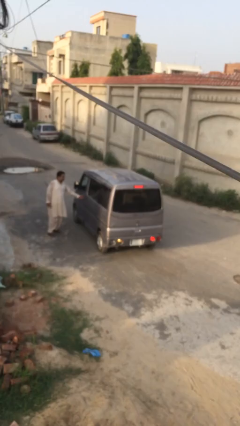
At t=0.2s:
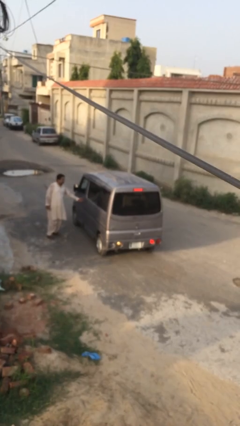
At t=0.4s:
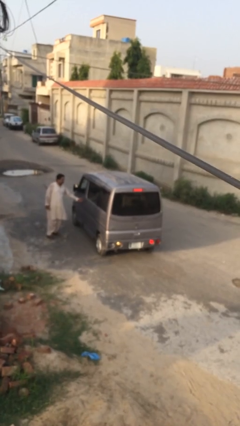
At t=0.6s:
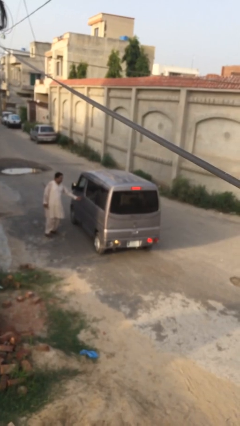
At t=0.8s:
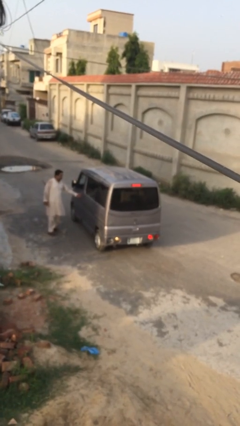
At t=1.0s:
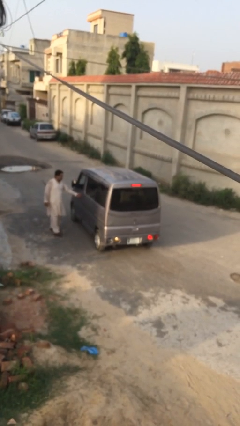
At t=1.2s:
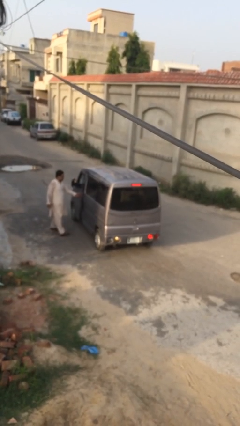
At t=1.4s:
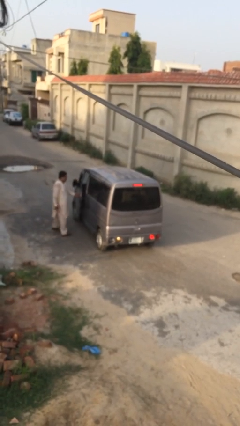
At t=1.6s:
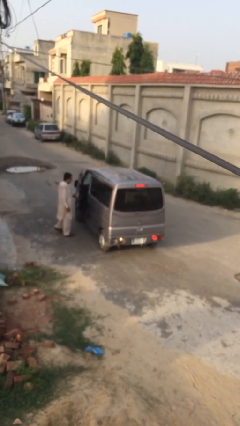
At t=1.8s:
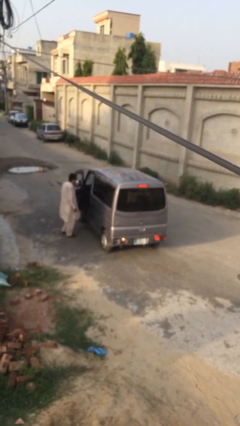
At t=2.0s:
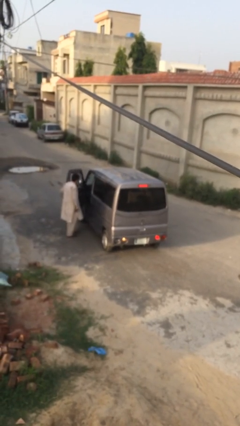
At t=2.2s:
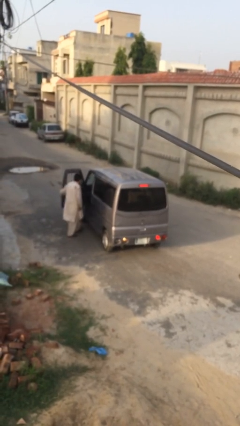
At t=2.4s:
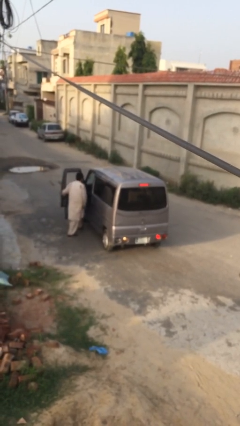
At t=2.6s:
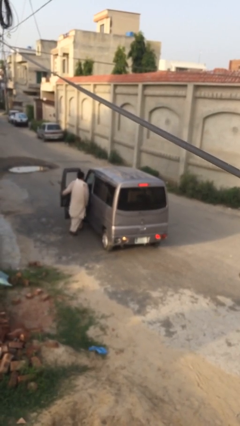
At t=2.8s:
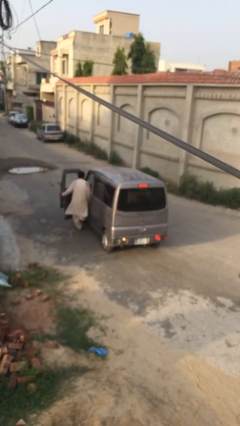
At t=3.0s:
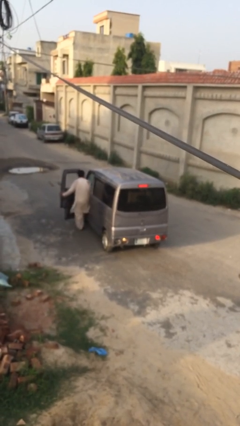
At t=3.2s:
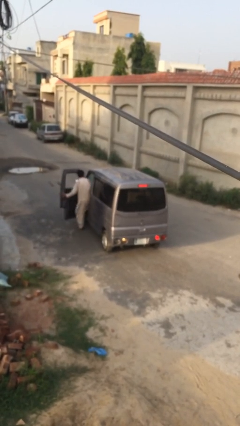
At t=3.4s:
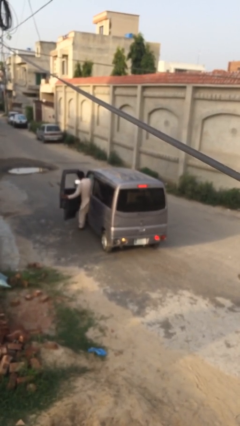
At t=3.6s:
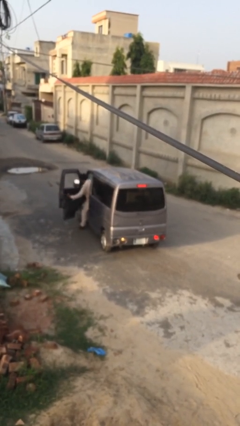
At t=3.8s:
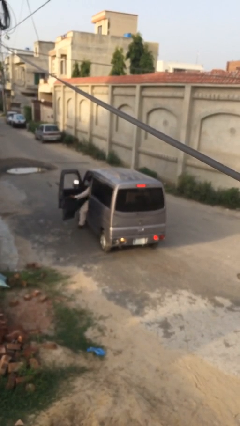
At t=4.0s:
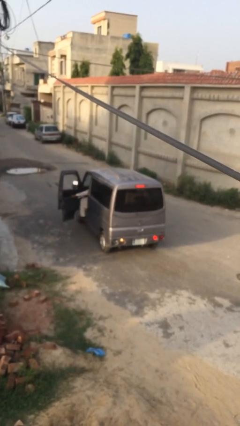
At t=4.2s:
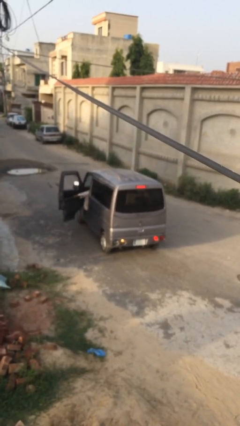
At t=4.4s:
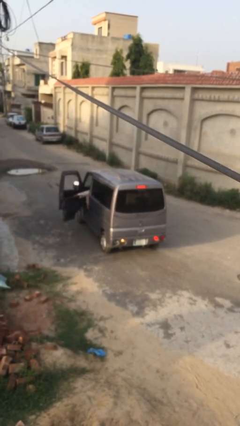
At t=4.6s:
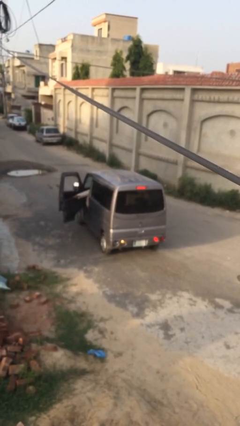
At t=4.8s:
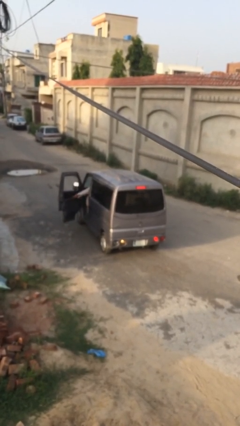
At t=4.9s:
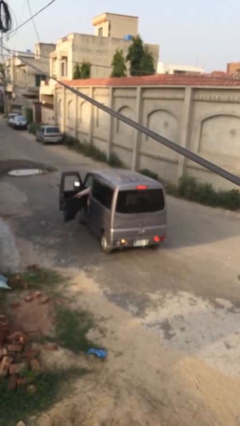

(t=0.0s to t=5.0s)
car picks up person

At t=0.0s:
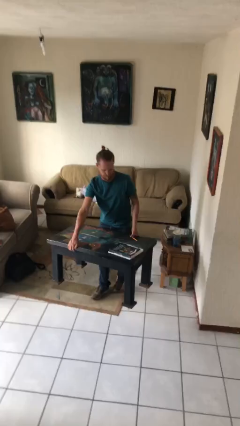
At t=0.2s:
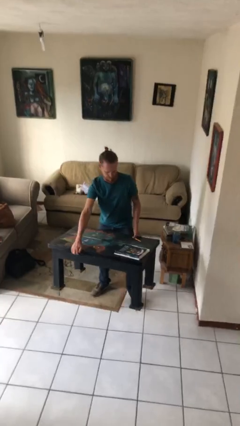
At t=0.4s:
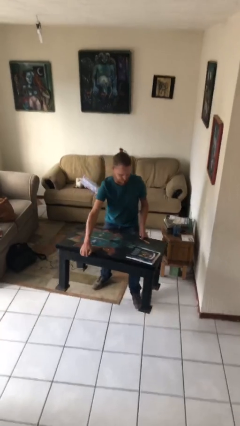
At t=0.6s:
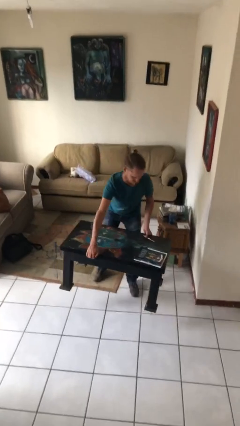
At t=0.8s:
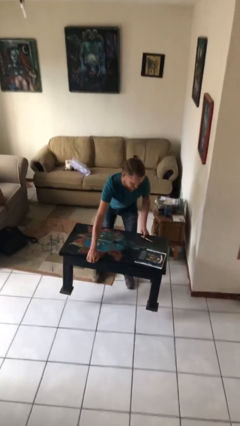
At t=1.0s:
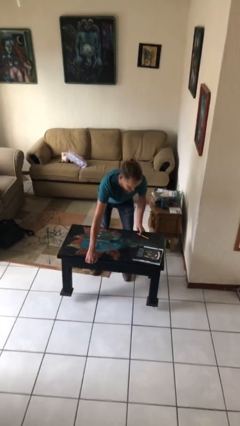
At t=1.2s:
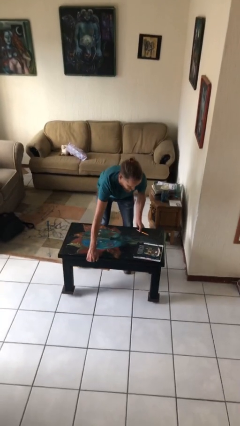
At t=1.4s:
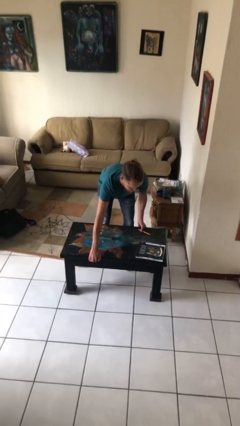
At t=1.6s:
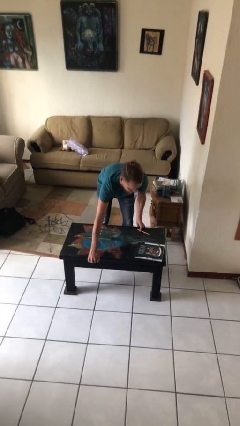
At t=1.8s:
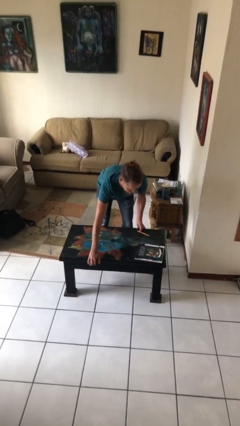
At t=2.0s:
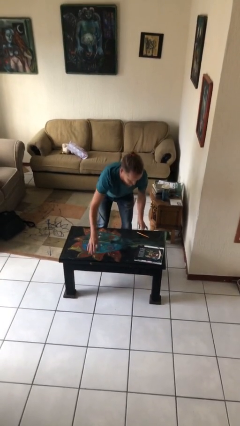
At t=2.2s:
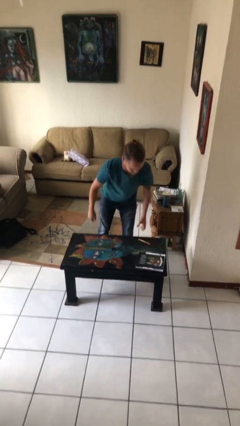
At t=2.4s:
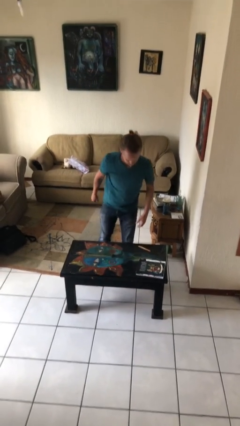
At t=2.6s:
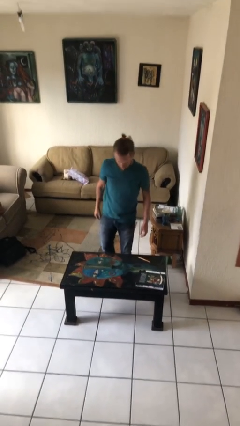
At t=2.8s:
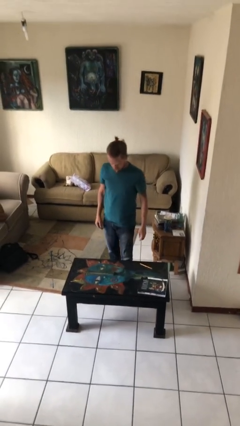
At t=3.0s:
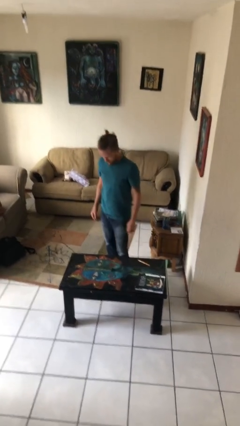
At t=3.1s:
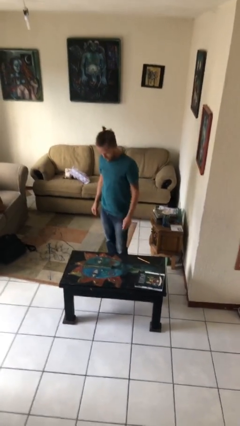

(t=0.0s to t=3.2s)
person puts down object on floor

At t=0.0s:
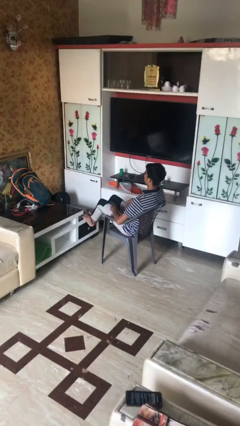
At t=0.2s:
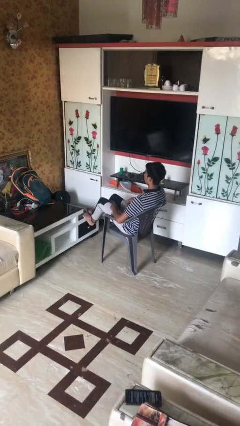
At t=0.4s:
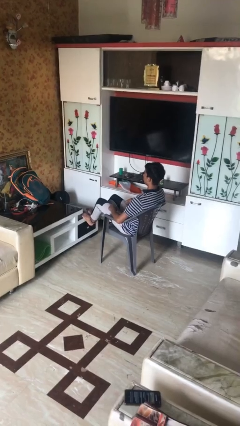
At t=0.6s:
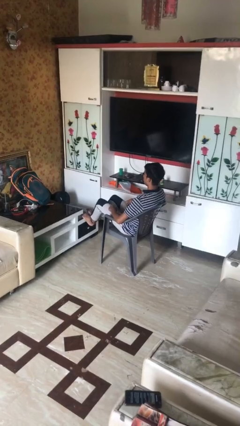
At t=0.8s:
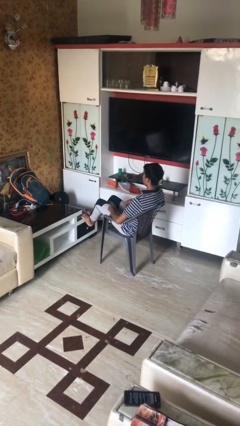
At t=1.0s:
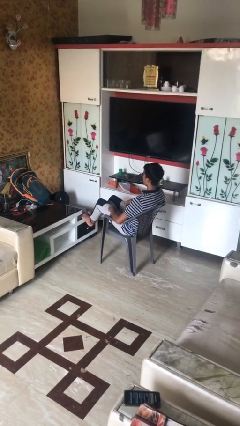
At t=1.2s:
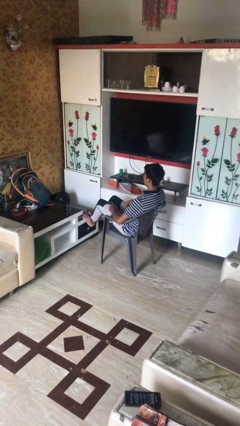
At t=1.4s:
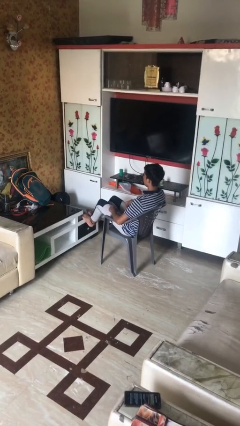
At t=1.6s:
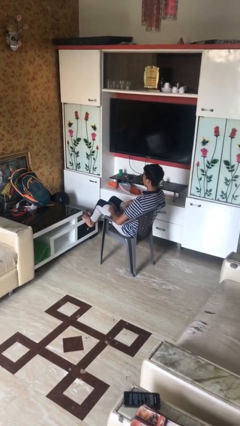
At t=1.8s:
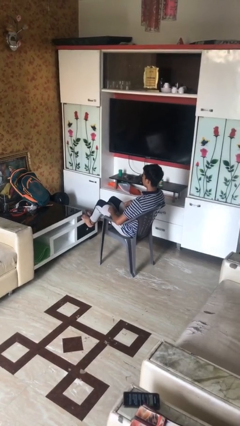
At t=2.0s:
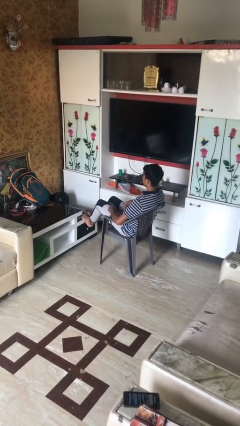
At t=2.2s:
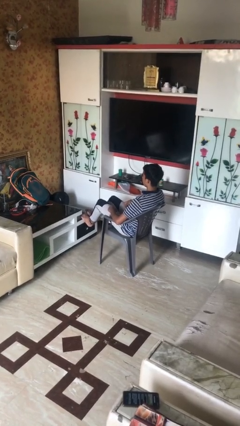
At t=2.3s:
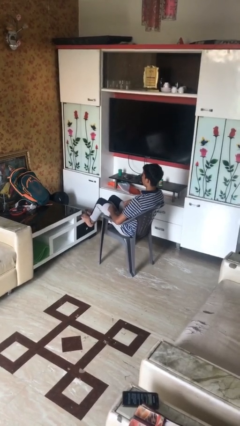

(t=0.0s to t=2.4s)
person puts feet up

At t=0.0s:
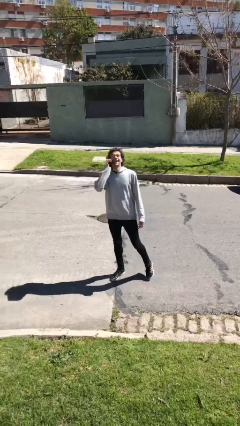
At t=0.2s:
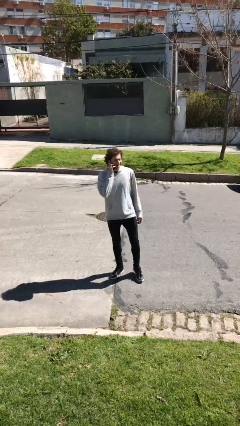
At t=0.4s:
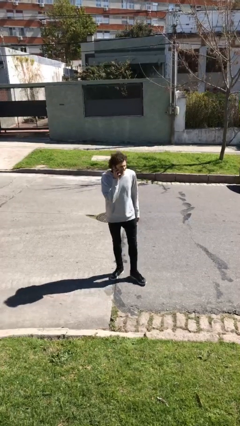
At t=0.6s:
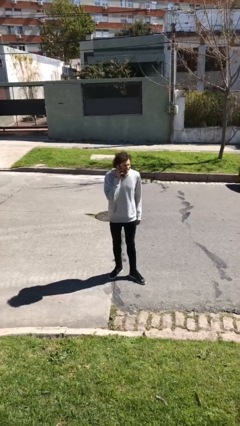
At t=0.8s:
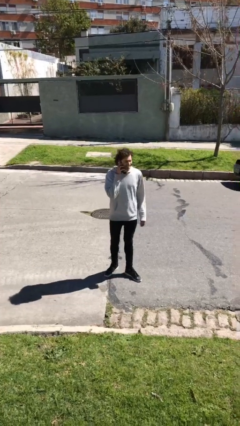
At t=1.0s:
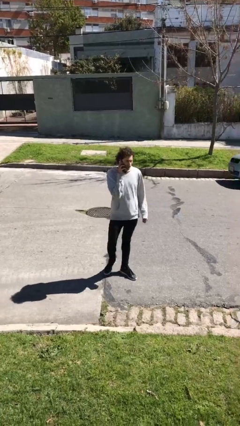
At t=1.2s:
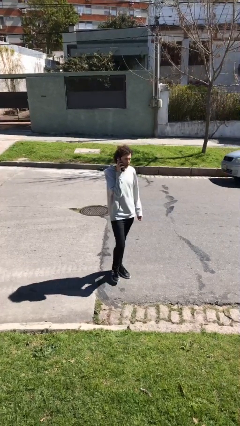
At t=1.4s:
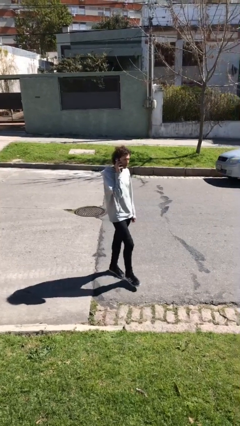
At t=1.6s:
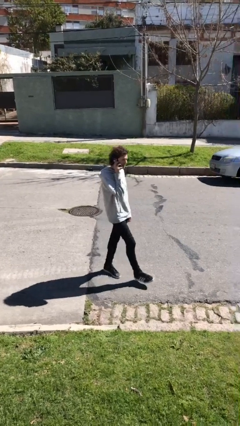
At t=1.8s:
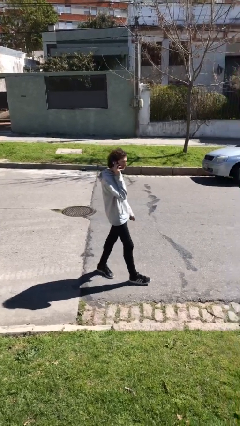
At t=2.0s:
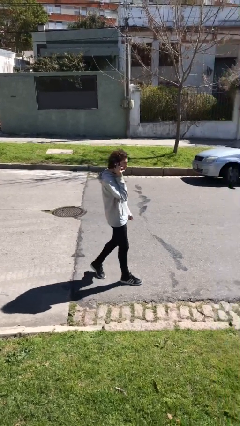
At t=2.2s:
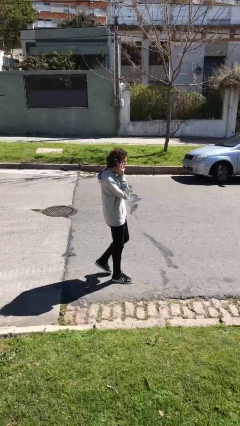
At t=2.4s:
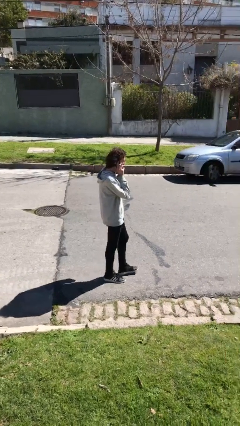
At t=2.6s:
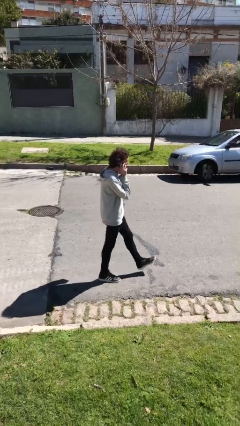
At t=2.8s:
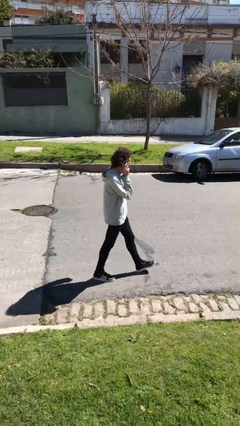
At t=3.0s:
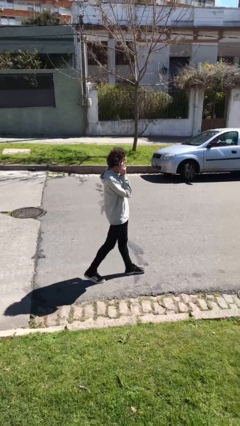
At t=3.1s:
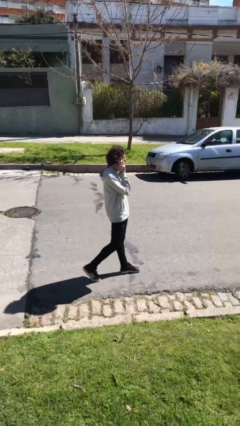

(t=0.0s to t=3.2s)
person talks on phone

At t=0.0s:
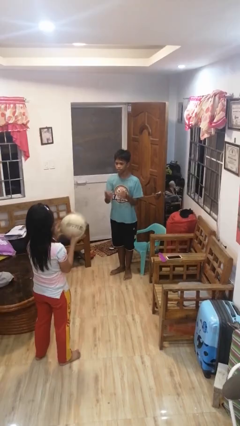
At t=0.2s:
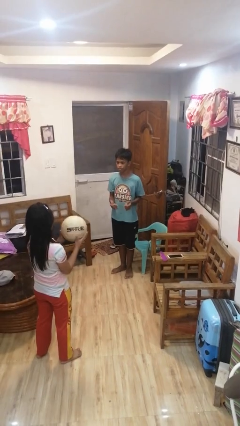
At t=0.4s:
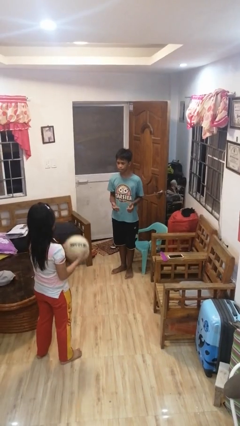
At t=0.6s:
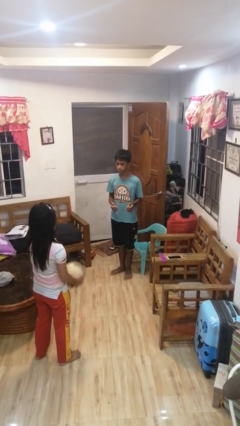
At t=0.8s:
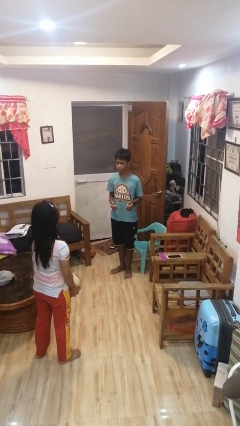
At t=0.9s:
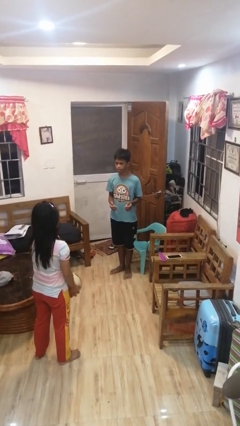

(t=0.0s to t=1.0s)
person throws object to person

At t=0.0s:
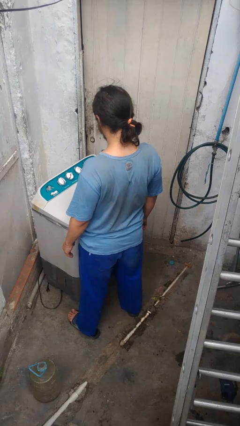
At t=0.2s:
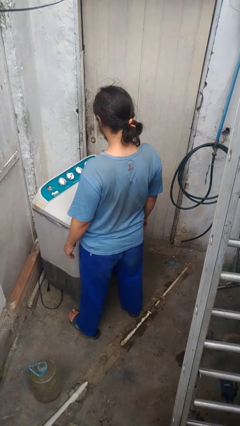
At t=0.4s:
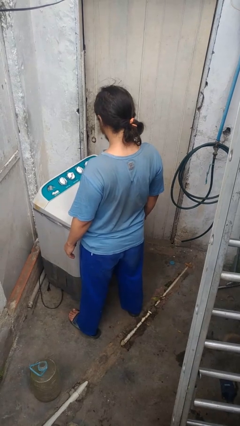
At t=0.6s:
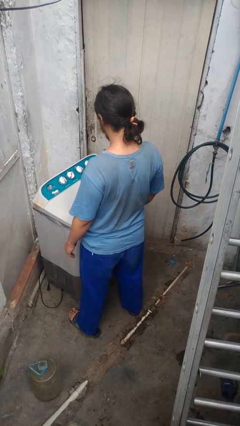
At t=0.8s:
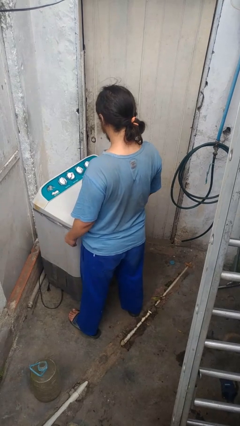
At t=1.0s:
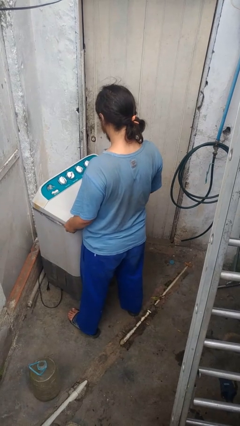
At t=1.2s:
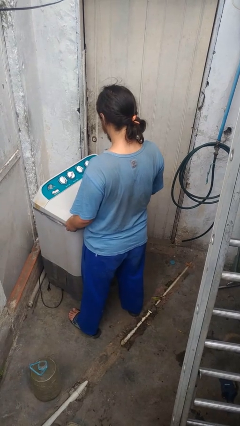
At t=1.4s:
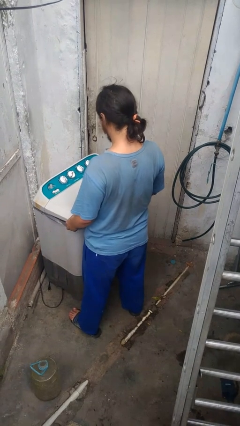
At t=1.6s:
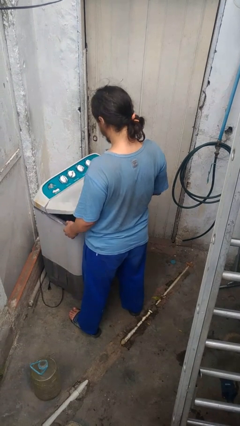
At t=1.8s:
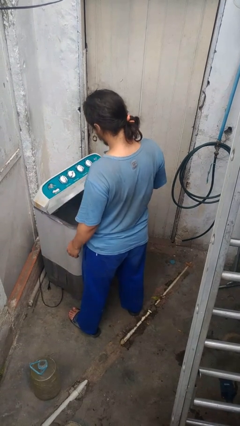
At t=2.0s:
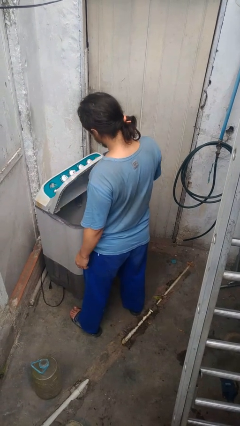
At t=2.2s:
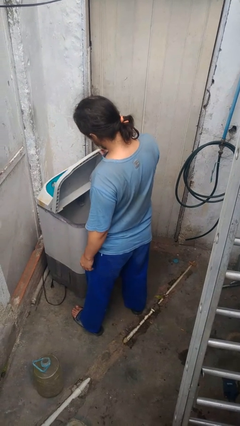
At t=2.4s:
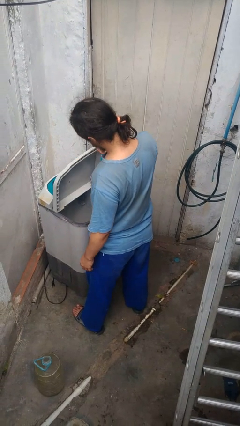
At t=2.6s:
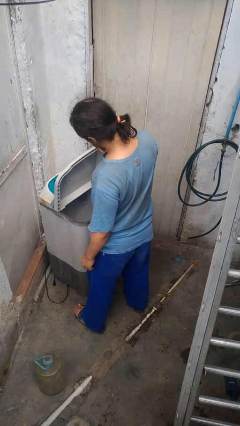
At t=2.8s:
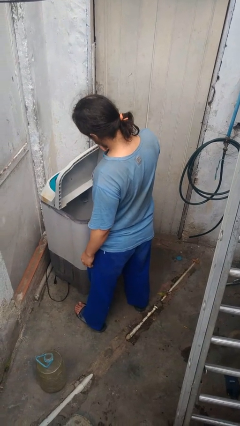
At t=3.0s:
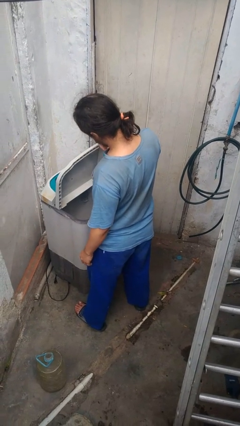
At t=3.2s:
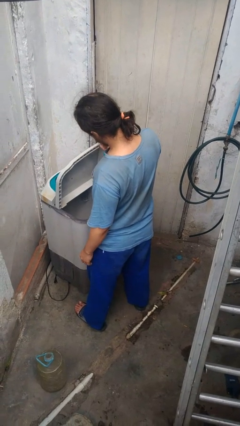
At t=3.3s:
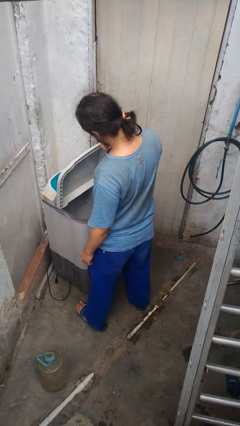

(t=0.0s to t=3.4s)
person opens clothes washer
